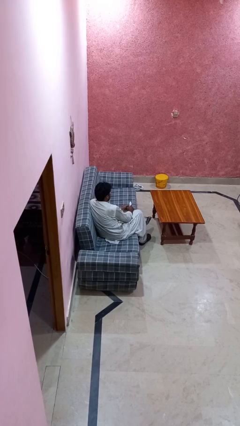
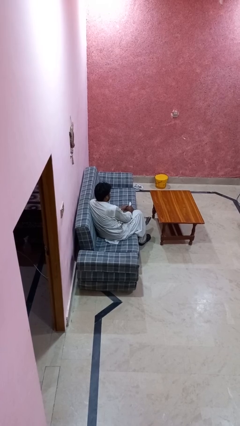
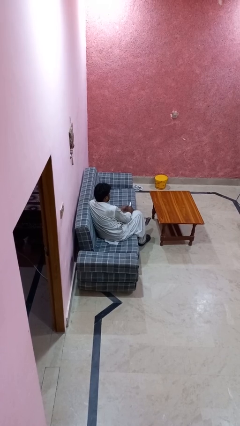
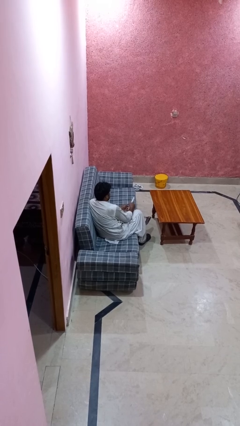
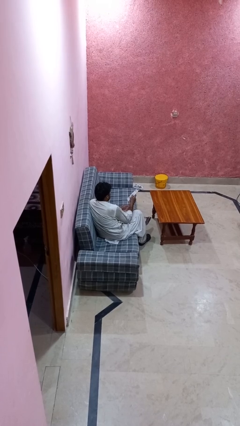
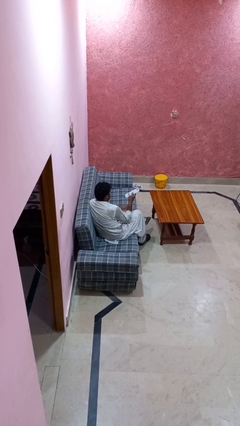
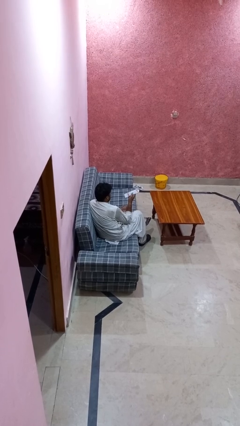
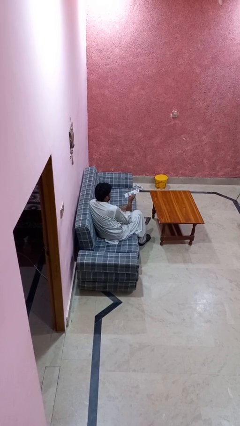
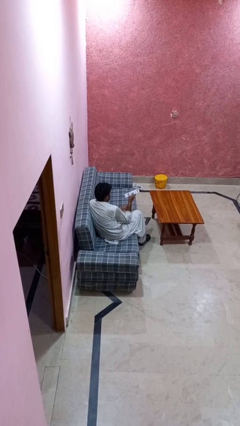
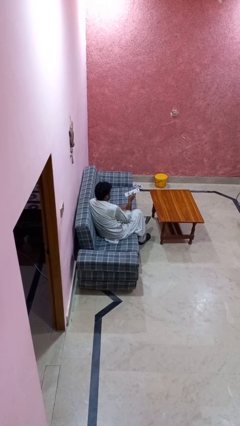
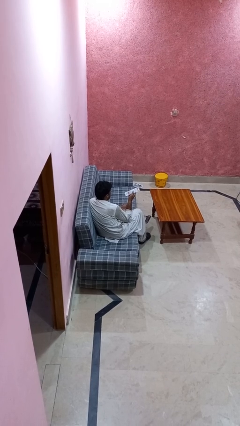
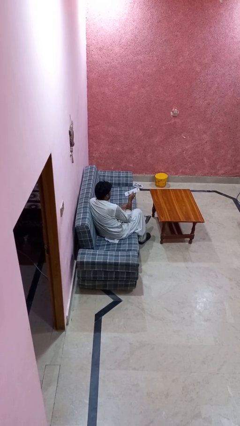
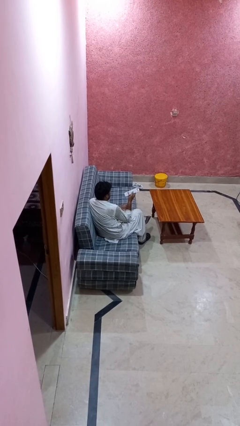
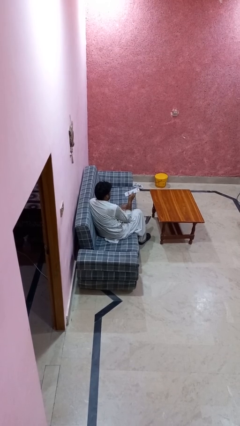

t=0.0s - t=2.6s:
person uses television remote

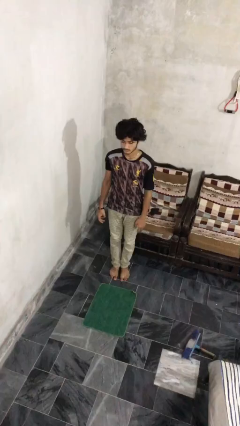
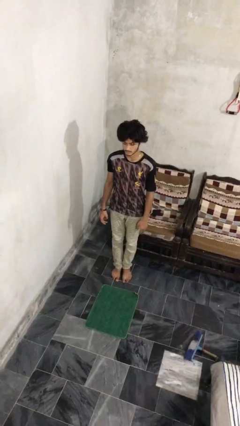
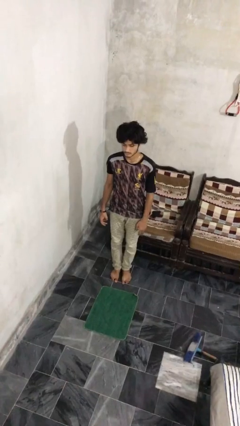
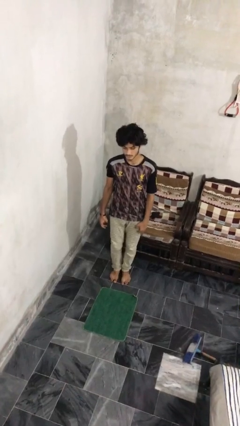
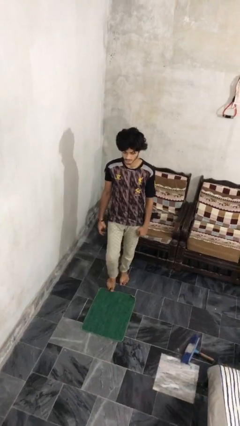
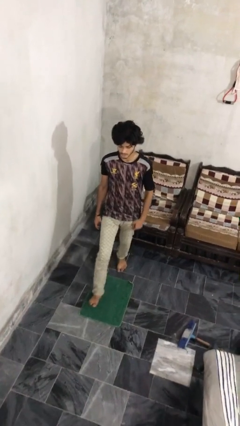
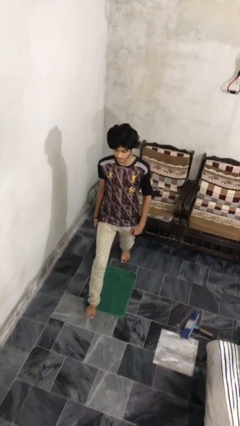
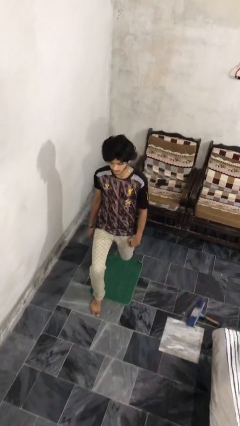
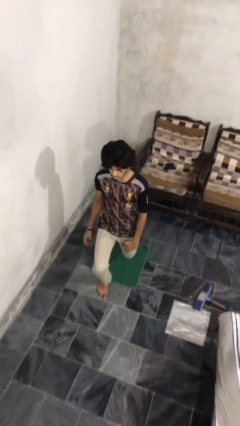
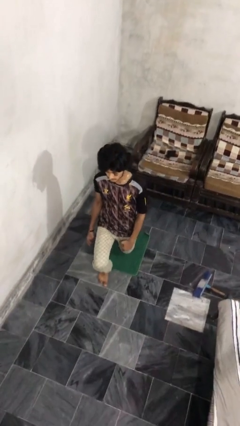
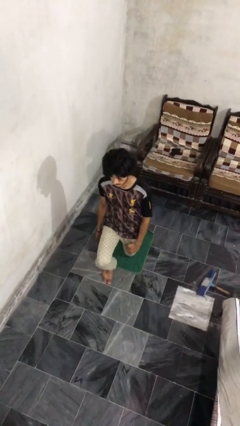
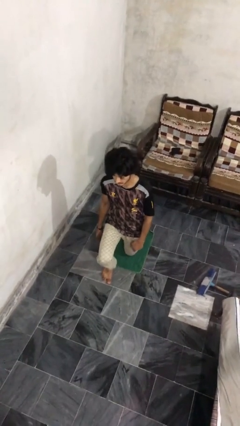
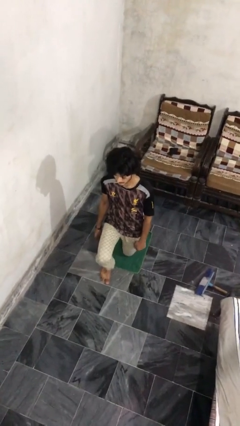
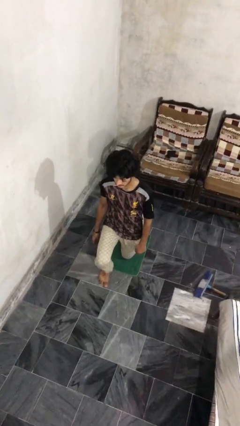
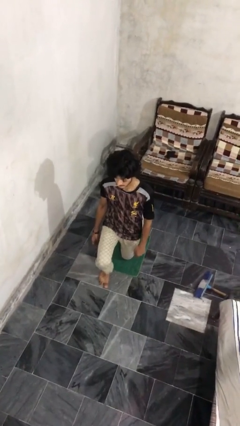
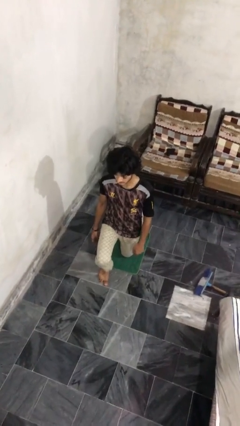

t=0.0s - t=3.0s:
person kneels

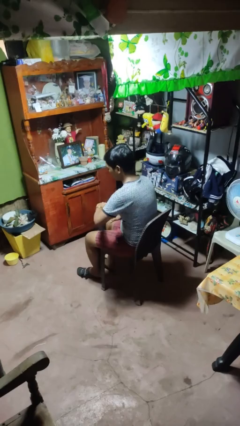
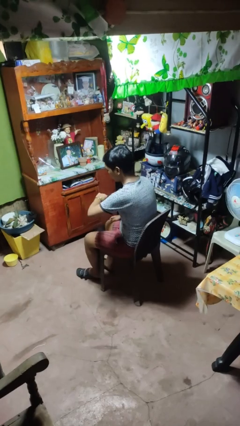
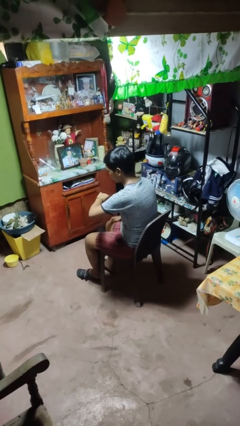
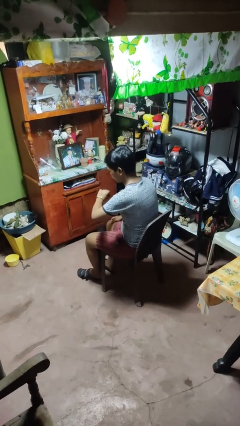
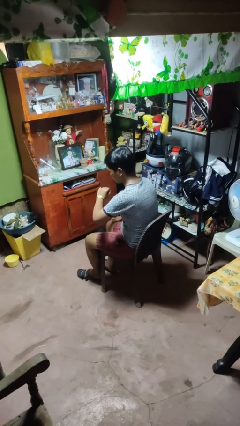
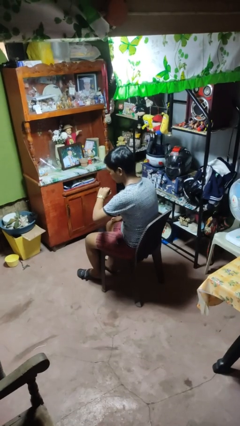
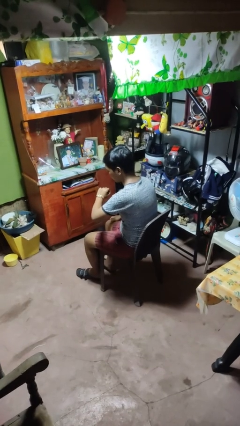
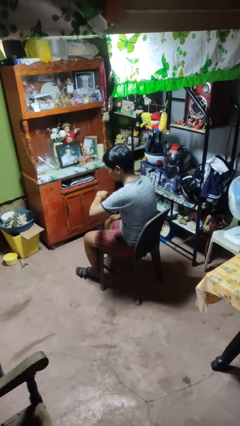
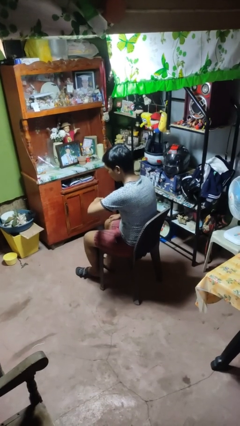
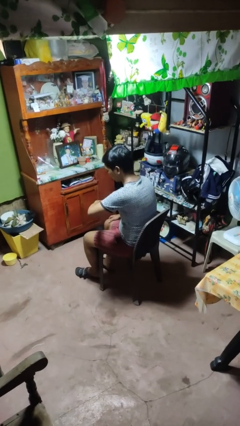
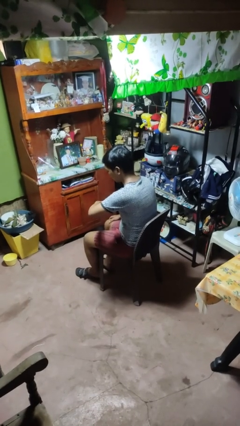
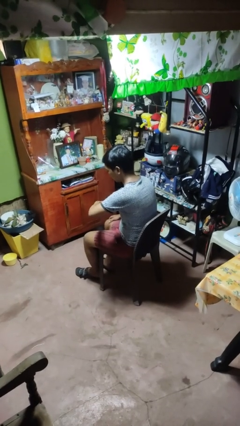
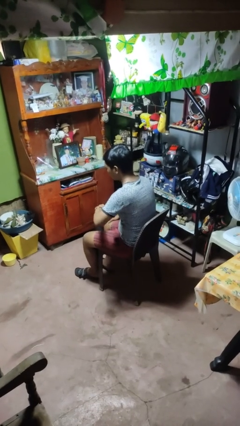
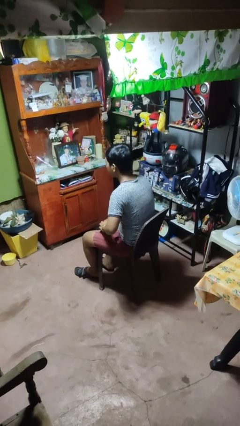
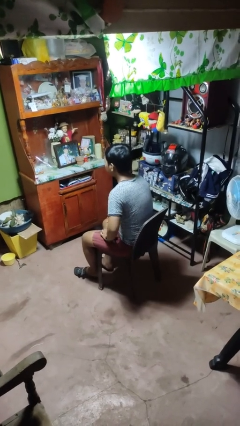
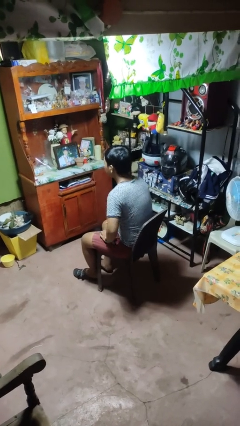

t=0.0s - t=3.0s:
person looks at wristwatch

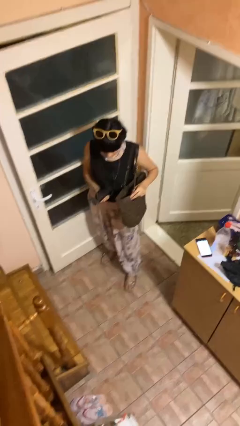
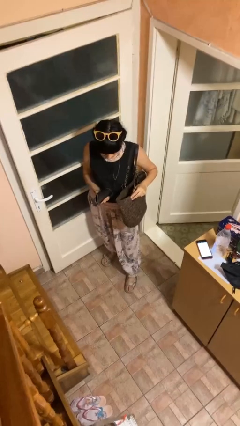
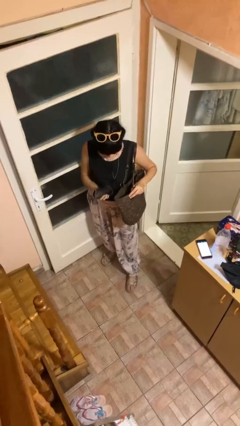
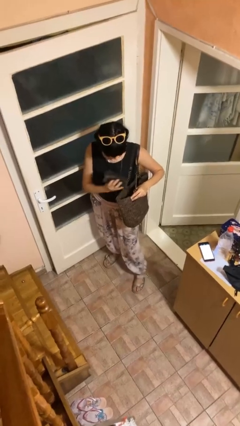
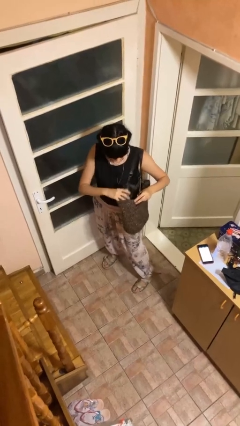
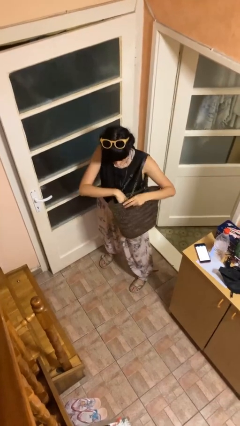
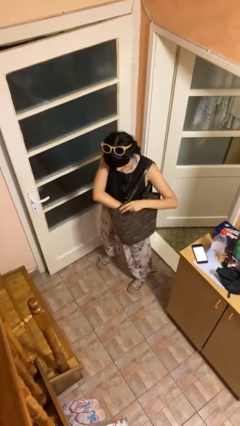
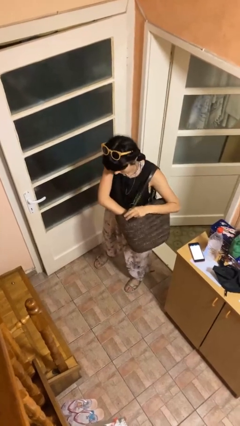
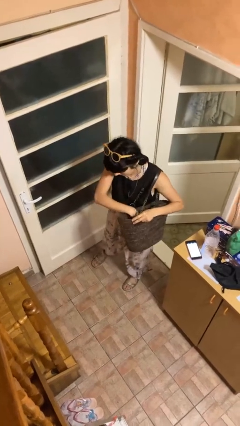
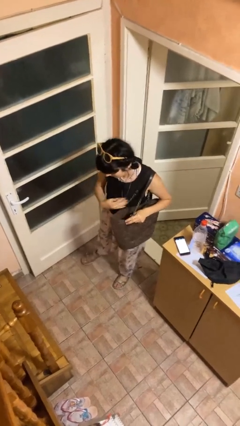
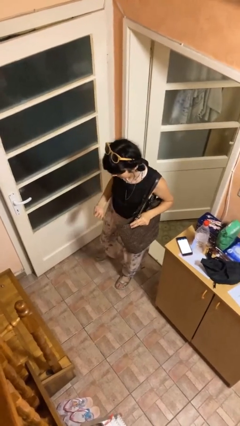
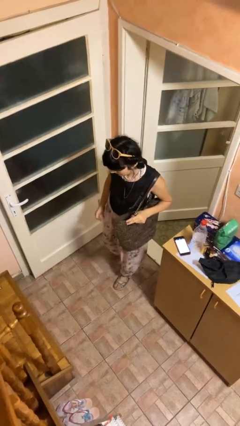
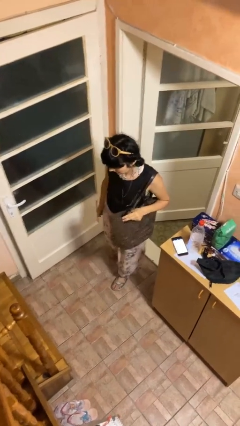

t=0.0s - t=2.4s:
person puts object into purse

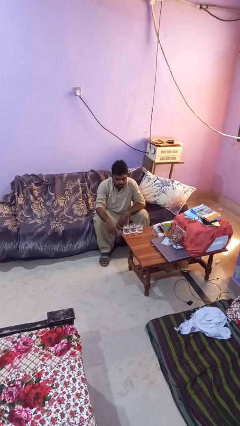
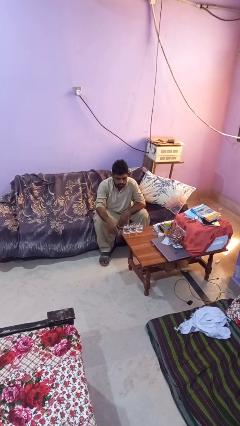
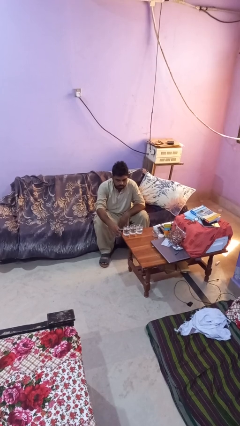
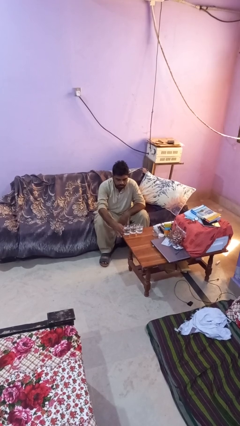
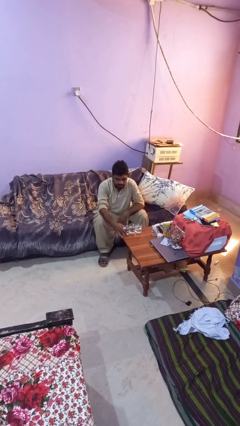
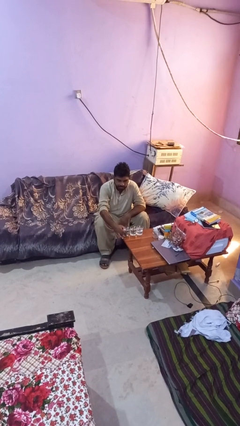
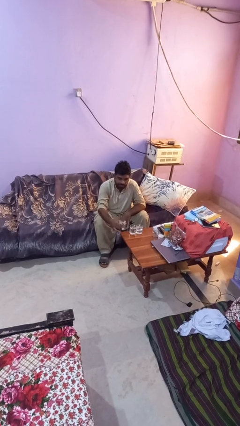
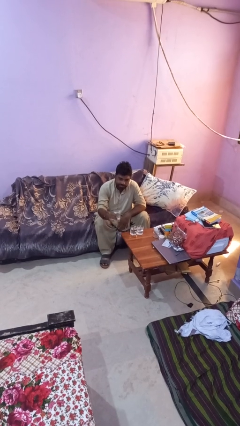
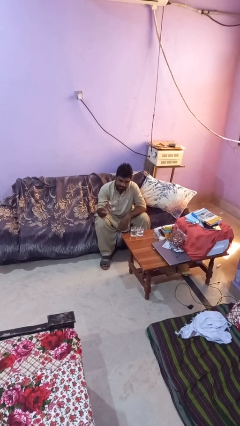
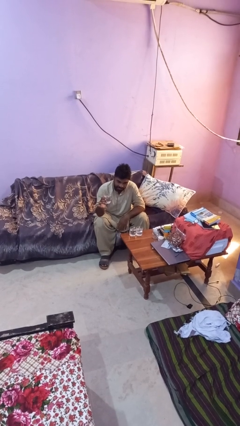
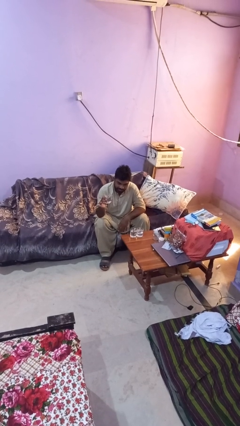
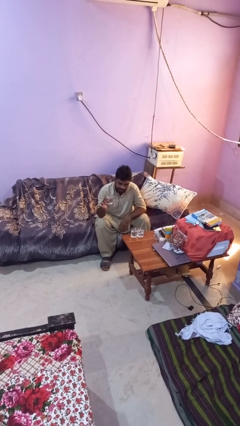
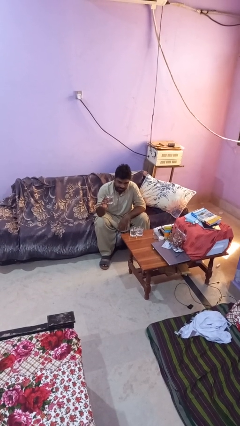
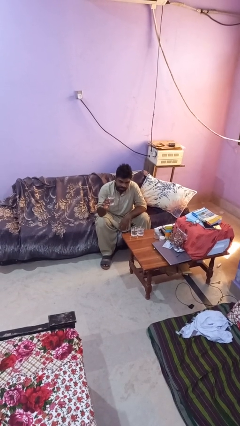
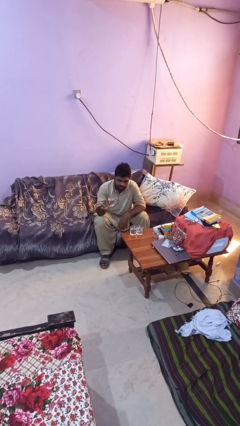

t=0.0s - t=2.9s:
person picks up object from table

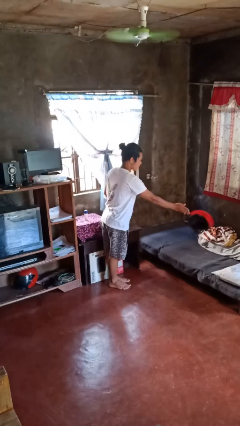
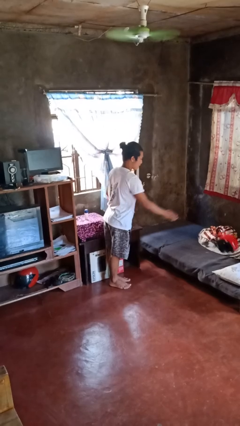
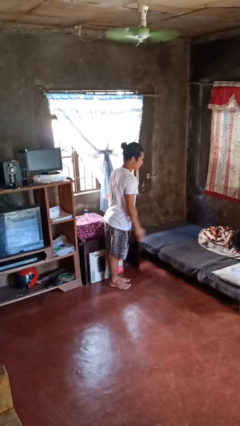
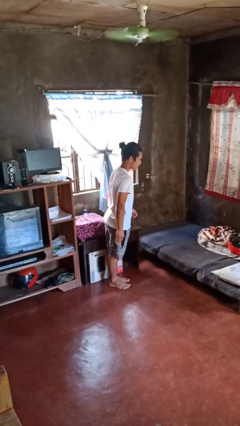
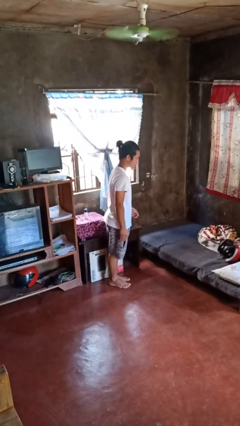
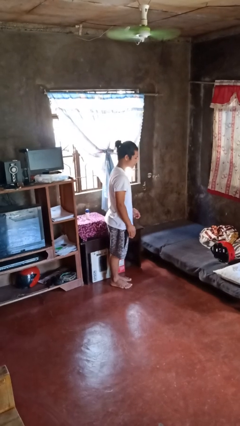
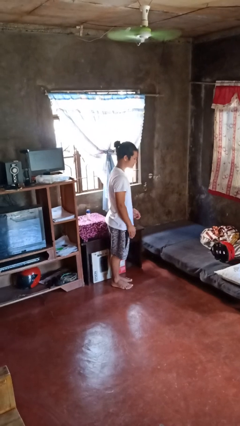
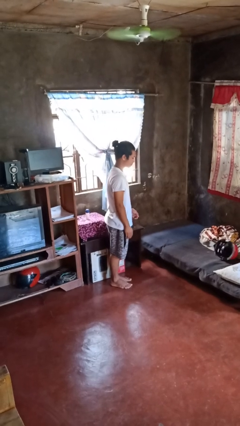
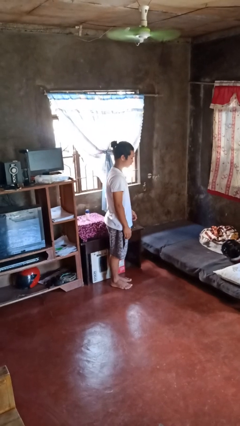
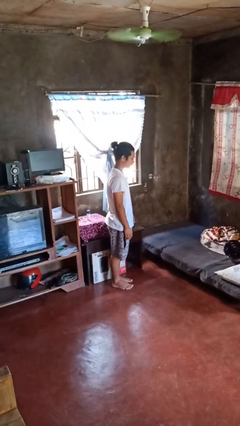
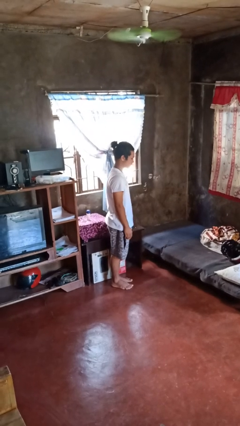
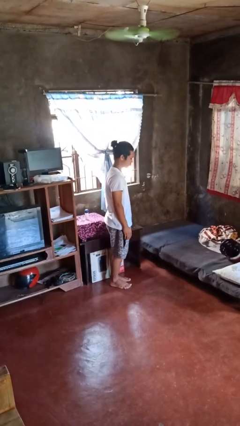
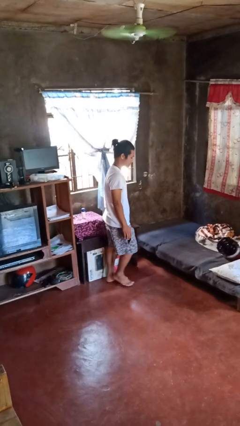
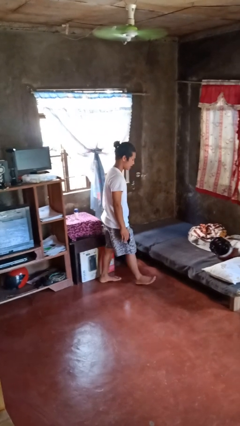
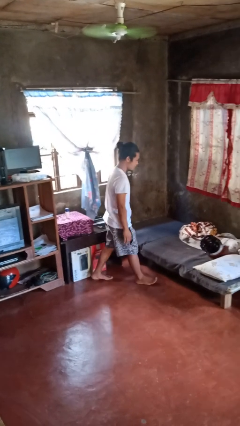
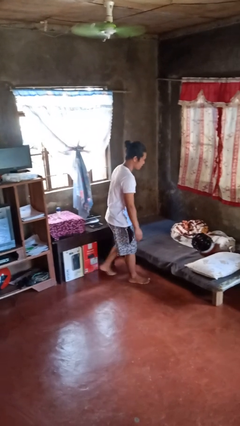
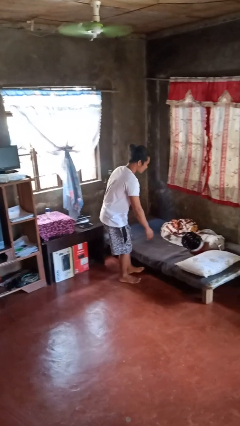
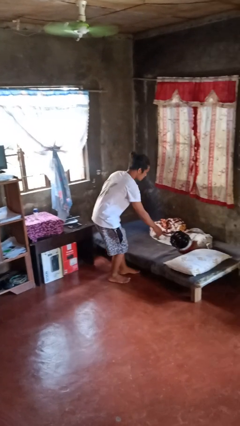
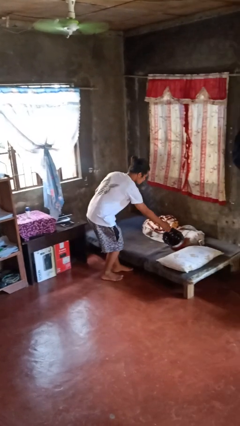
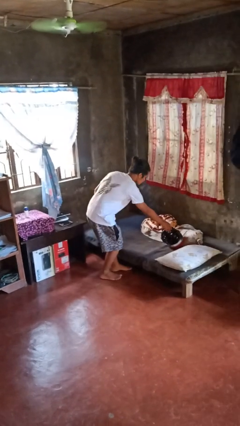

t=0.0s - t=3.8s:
person throws object on bed
